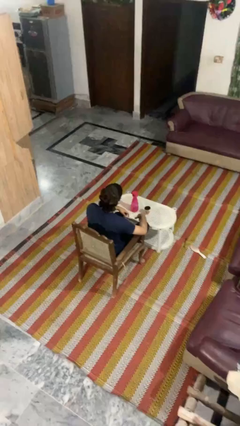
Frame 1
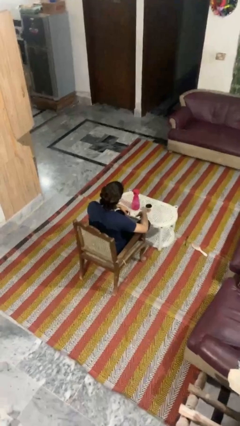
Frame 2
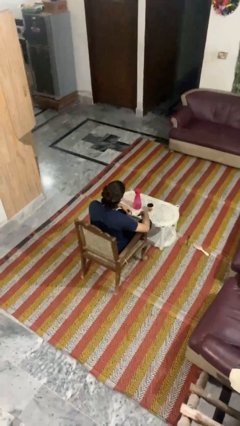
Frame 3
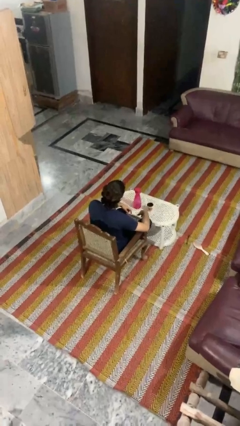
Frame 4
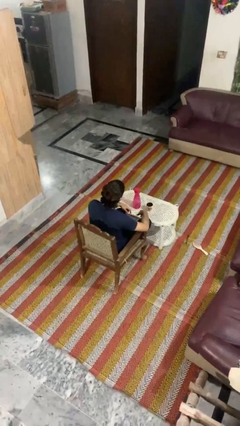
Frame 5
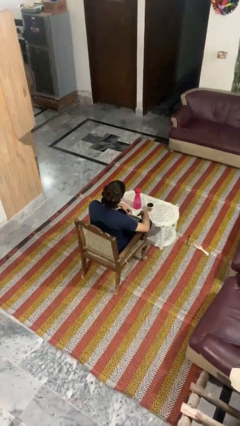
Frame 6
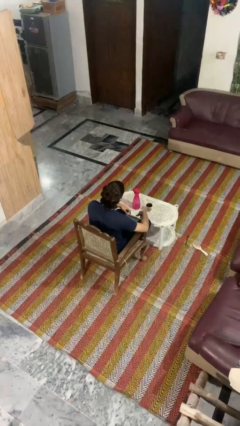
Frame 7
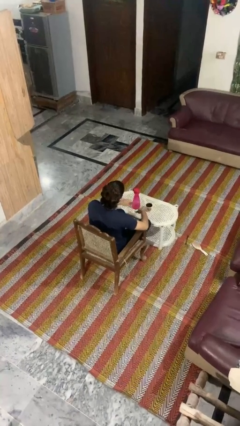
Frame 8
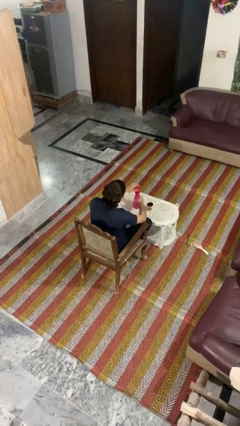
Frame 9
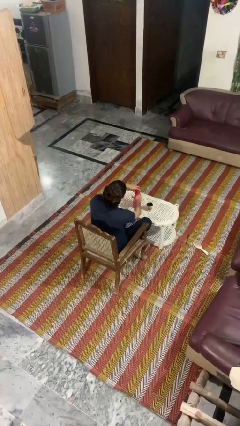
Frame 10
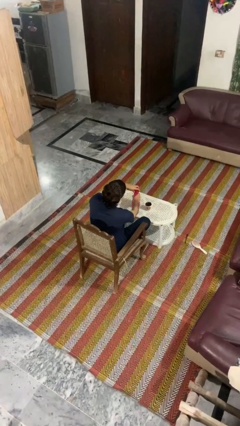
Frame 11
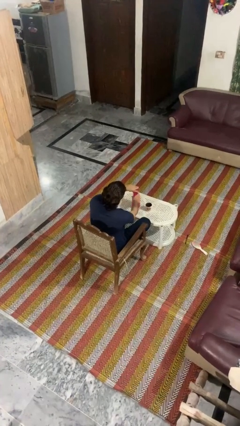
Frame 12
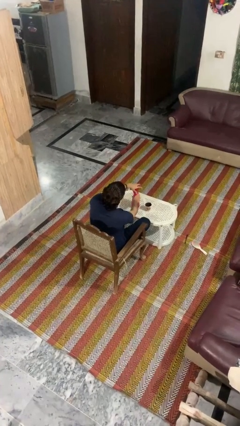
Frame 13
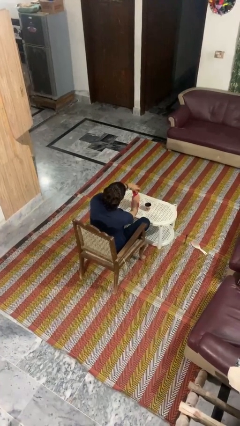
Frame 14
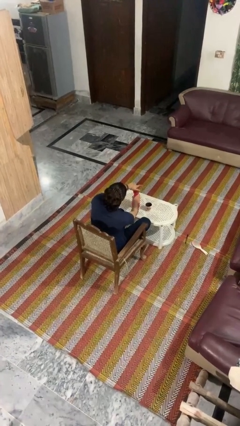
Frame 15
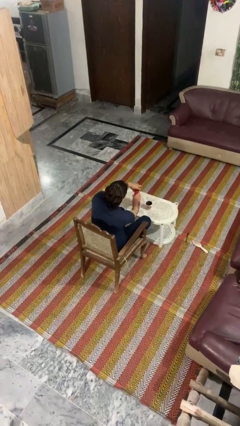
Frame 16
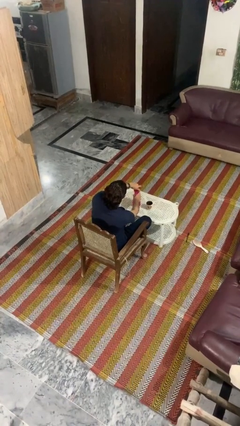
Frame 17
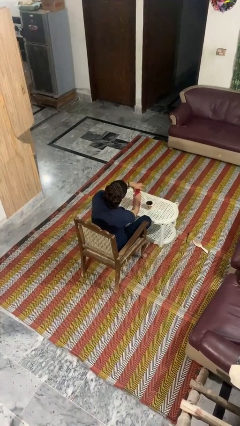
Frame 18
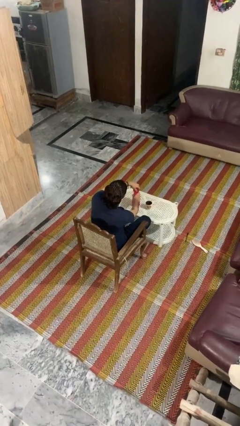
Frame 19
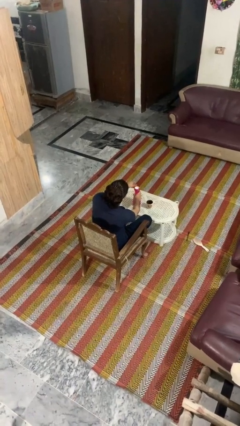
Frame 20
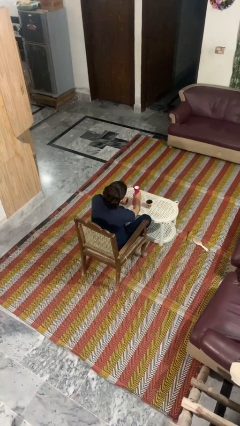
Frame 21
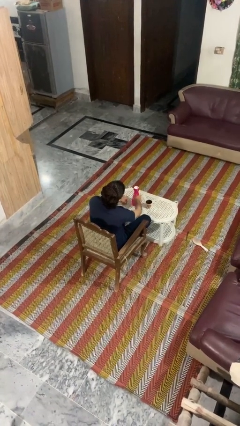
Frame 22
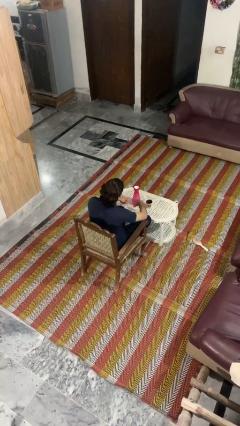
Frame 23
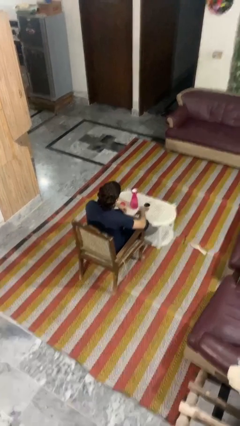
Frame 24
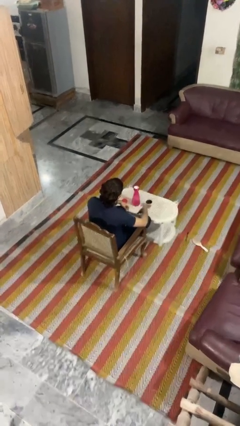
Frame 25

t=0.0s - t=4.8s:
person unscrews lid from bottle

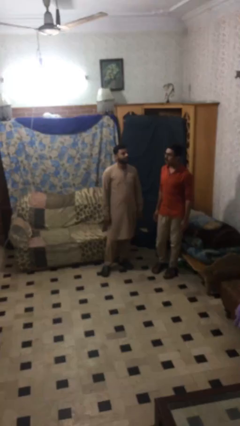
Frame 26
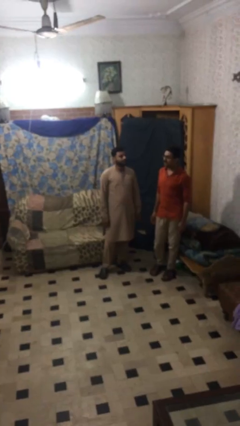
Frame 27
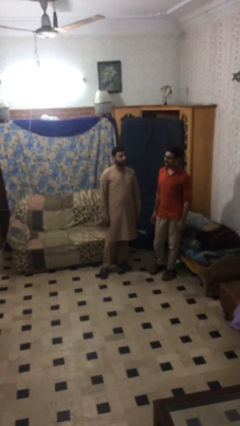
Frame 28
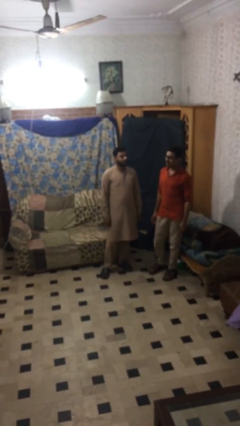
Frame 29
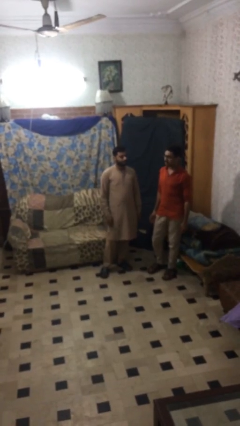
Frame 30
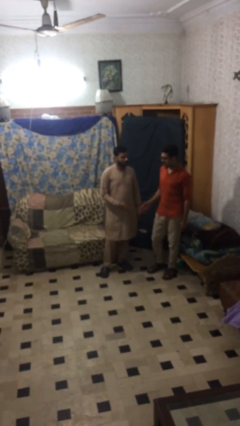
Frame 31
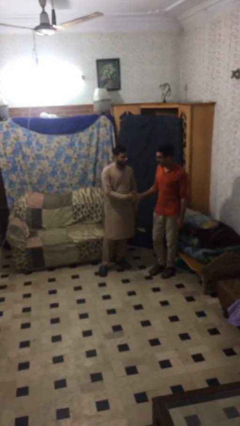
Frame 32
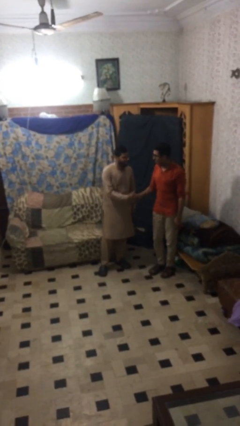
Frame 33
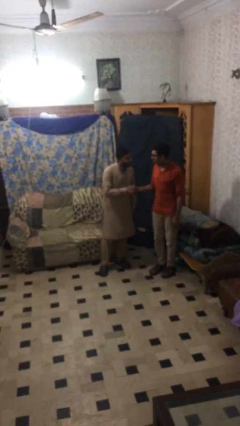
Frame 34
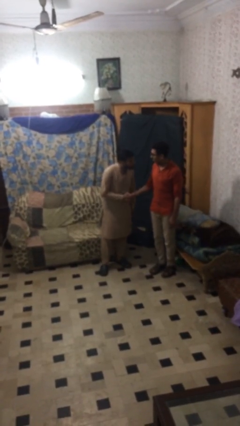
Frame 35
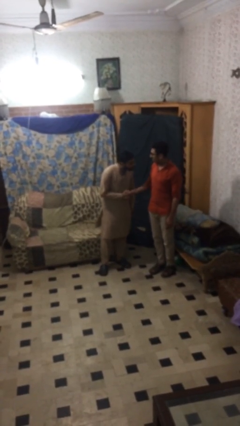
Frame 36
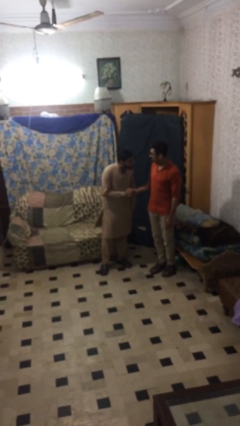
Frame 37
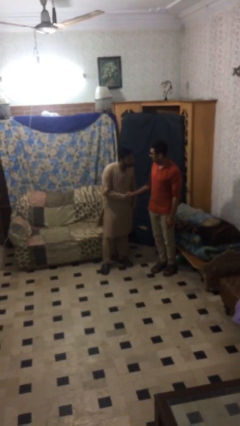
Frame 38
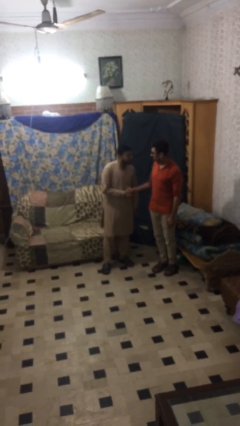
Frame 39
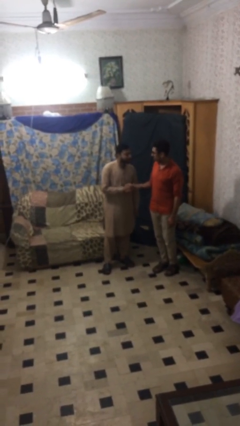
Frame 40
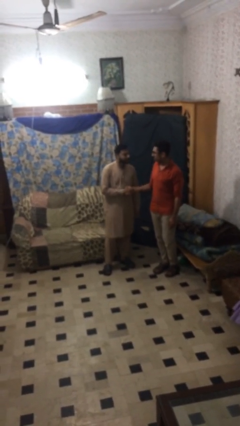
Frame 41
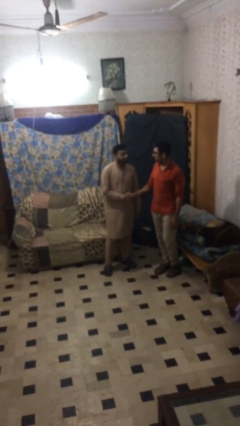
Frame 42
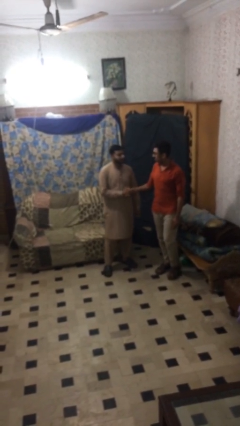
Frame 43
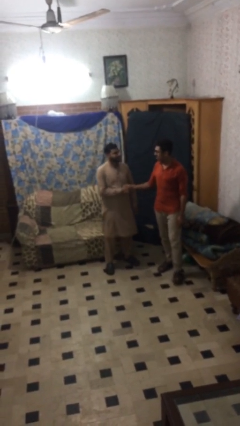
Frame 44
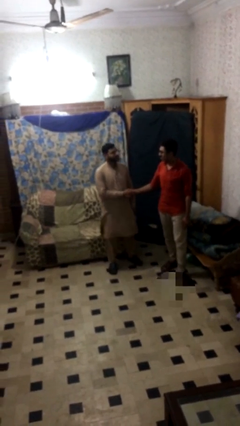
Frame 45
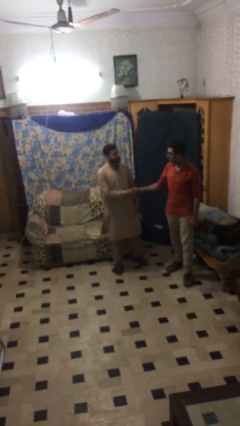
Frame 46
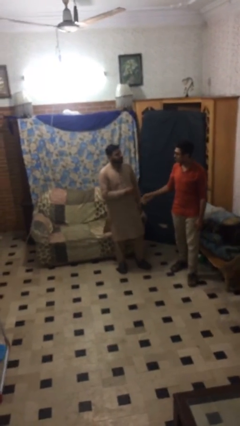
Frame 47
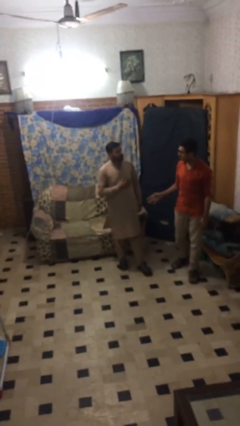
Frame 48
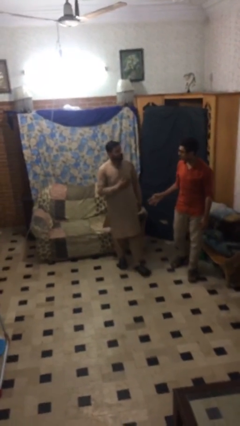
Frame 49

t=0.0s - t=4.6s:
person shakes hand

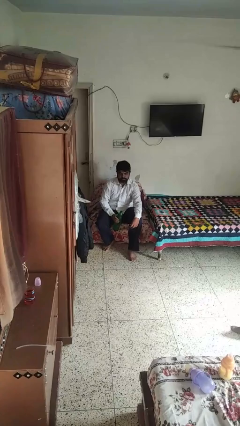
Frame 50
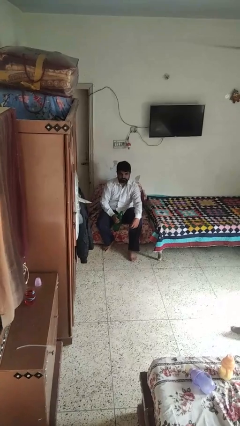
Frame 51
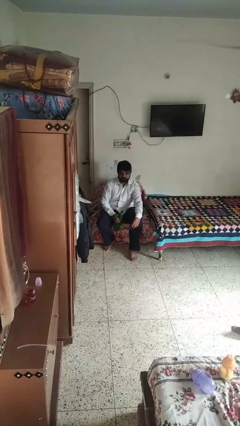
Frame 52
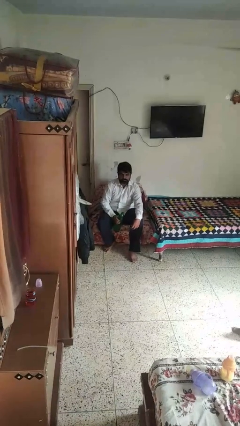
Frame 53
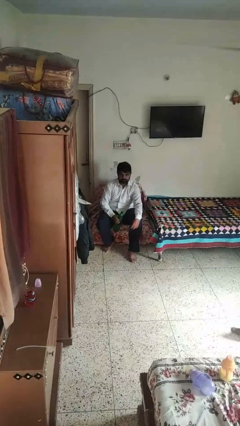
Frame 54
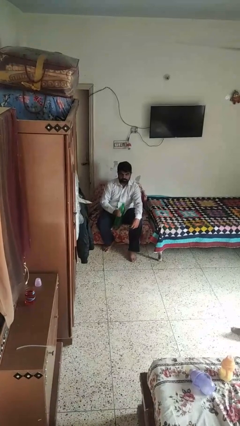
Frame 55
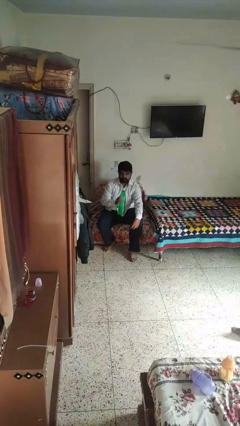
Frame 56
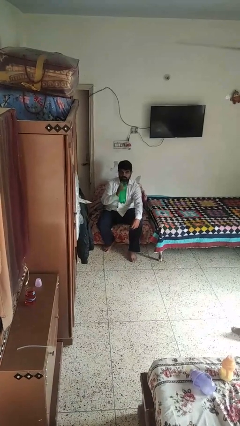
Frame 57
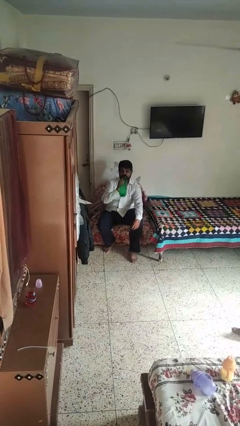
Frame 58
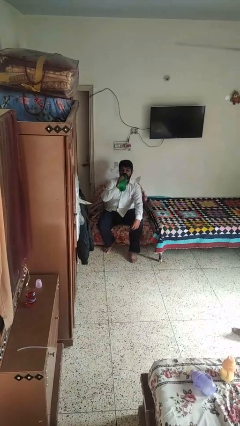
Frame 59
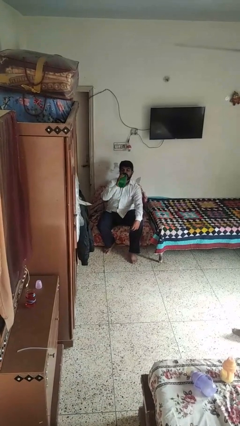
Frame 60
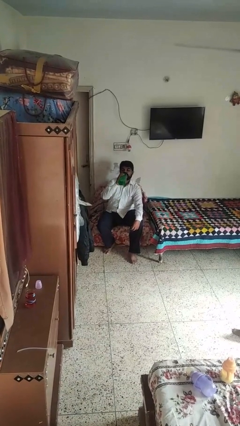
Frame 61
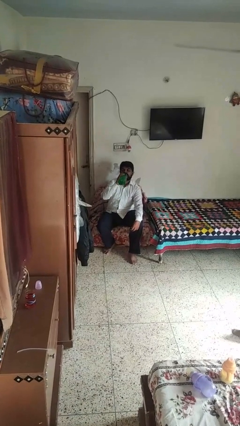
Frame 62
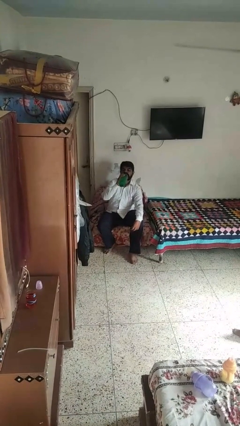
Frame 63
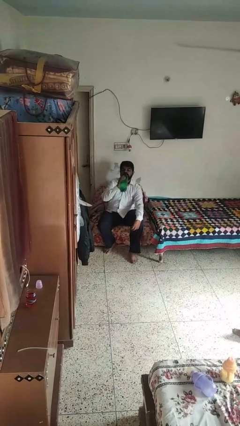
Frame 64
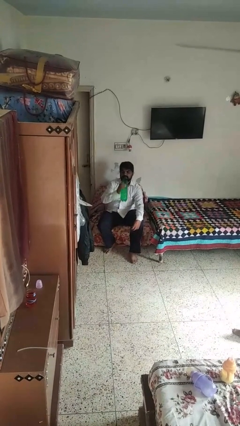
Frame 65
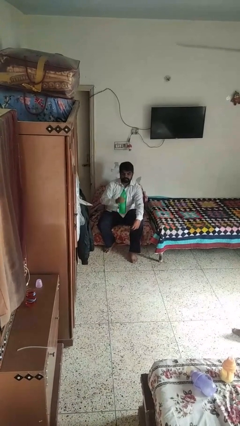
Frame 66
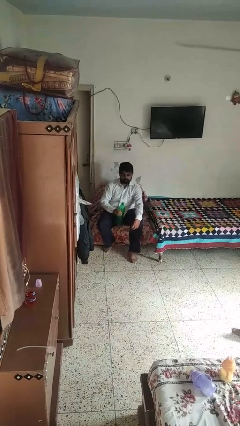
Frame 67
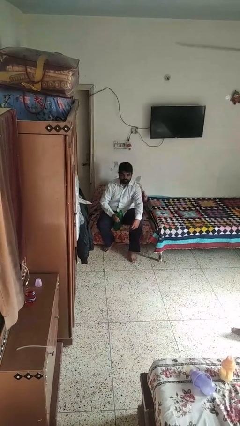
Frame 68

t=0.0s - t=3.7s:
person drinks from bottle

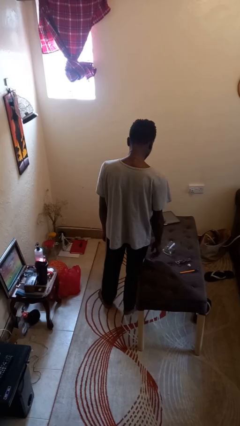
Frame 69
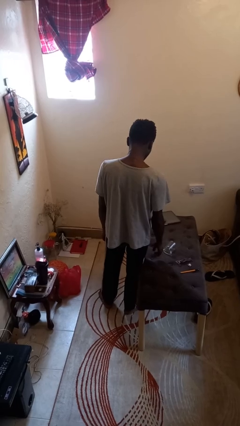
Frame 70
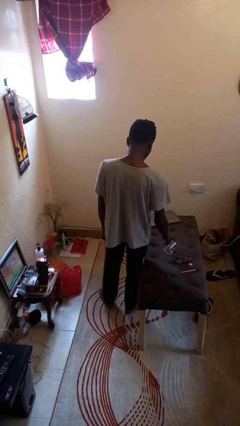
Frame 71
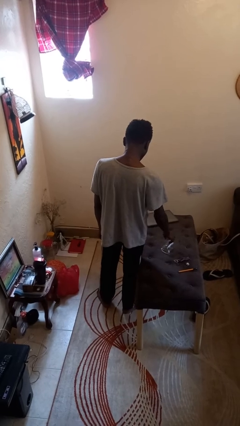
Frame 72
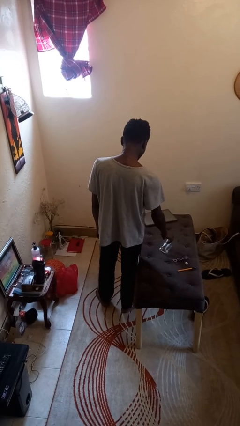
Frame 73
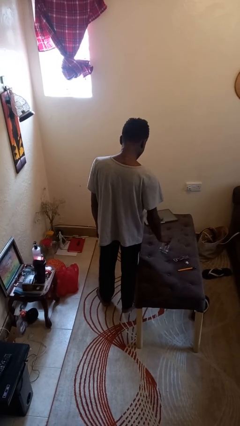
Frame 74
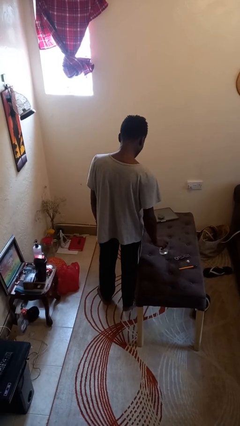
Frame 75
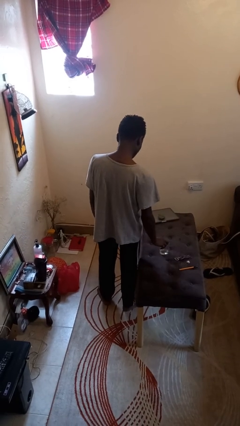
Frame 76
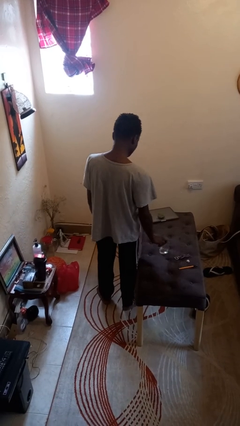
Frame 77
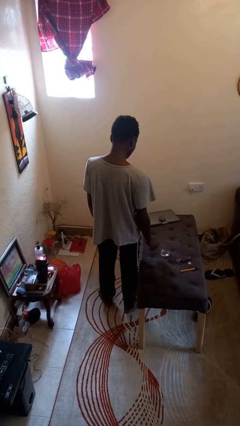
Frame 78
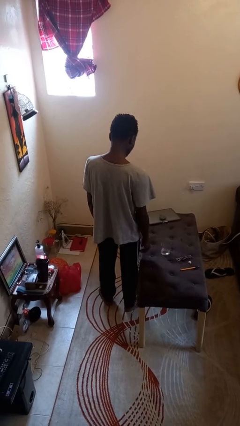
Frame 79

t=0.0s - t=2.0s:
person sets upright glass

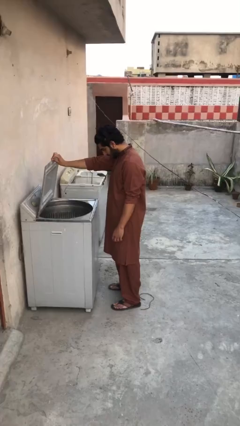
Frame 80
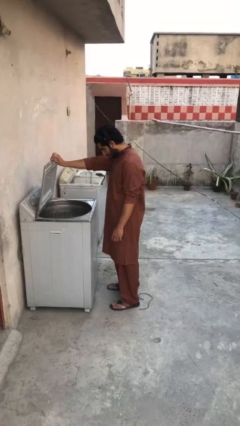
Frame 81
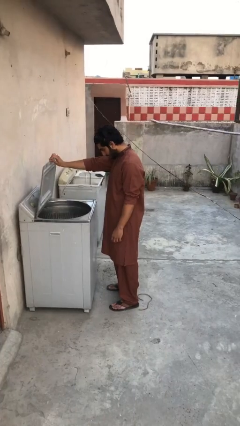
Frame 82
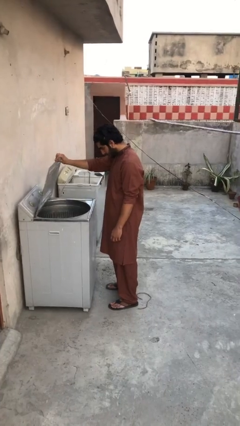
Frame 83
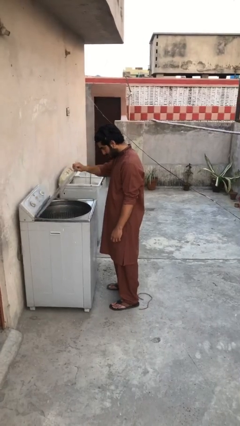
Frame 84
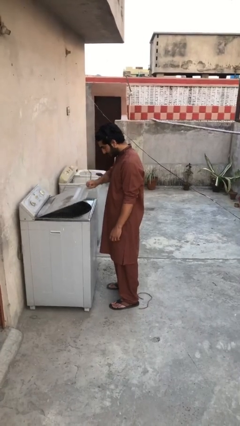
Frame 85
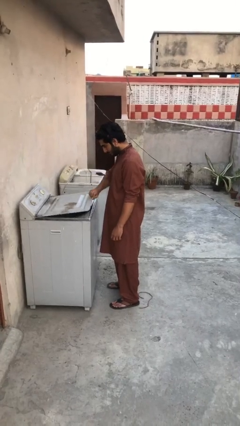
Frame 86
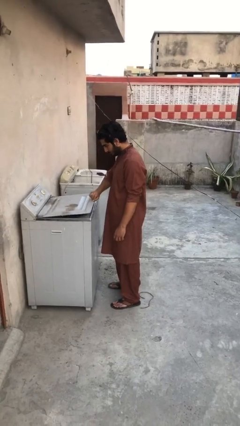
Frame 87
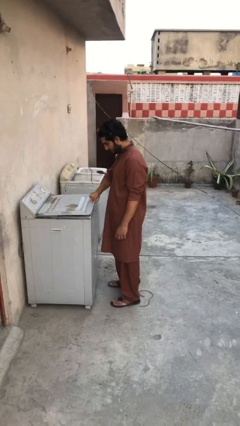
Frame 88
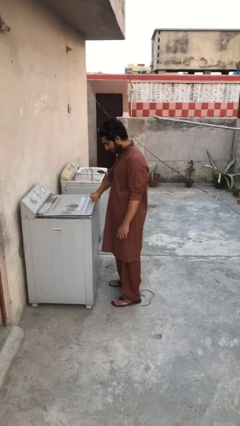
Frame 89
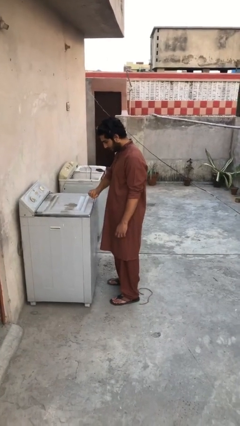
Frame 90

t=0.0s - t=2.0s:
person closes clothes washer
